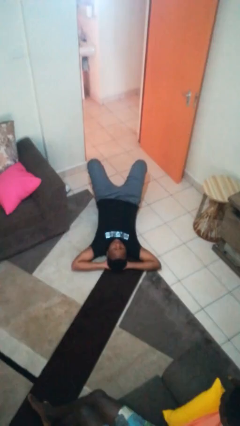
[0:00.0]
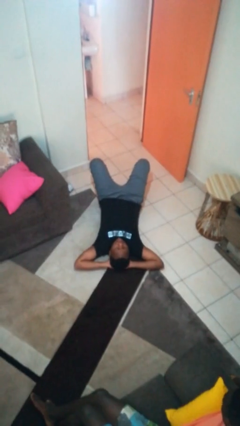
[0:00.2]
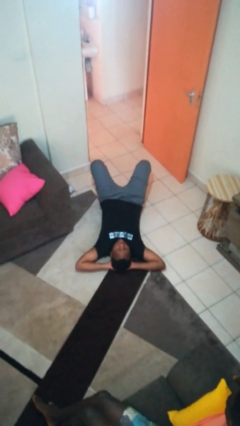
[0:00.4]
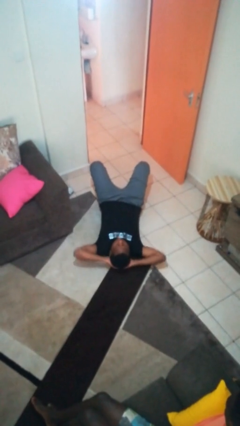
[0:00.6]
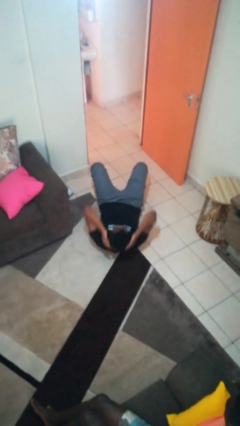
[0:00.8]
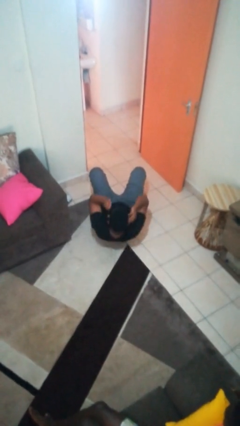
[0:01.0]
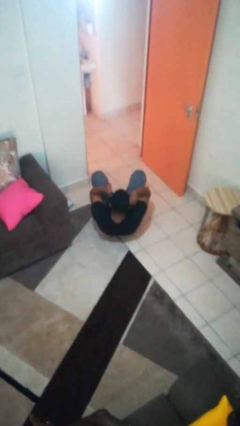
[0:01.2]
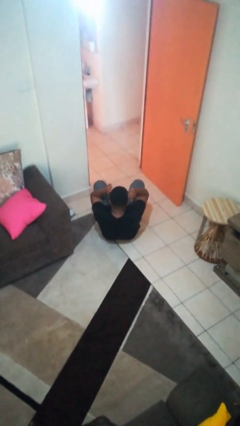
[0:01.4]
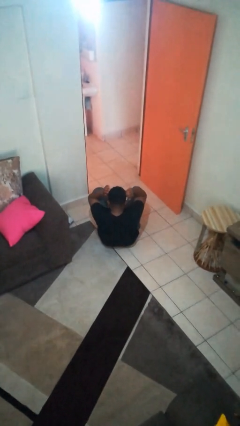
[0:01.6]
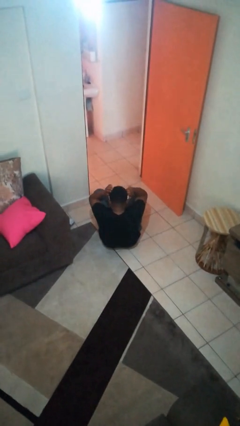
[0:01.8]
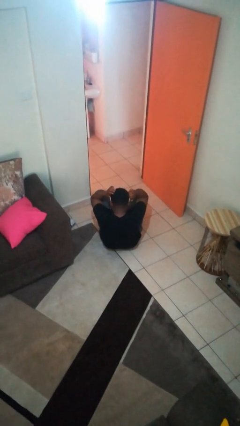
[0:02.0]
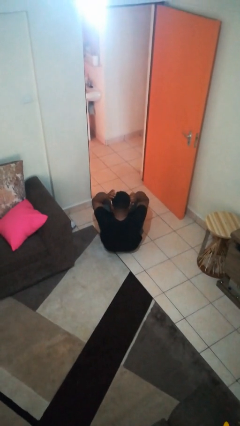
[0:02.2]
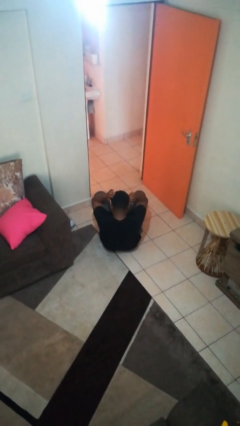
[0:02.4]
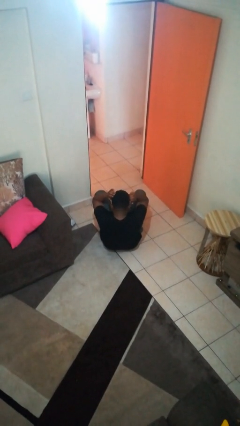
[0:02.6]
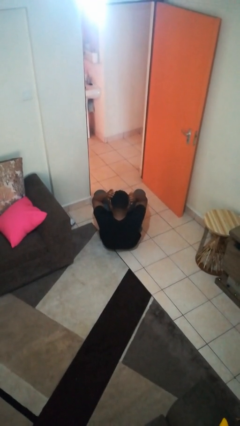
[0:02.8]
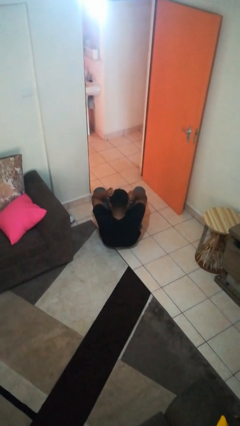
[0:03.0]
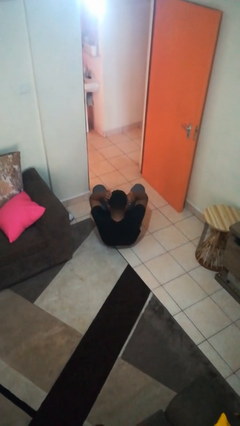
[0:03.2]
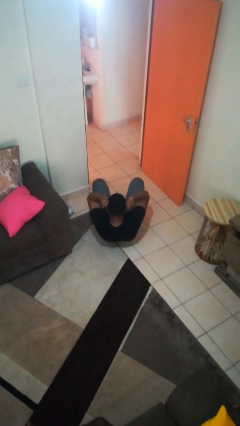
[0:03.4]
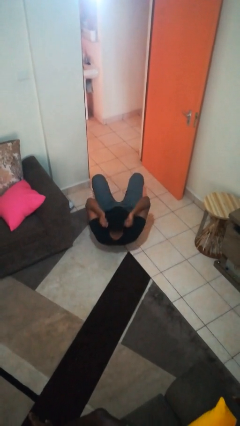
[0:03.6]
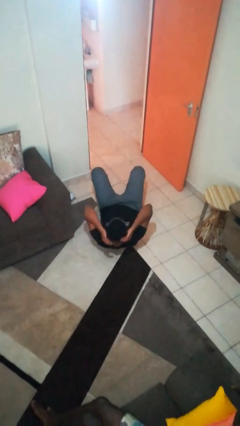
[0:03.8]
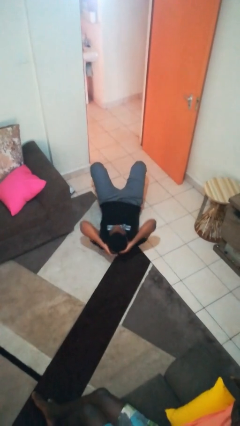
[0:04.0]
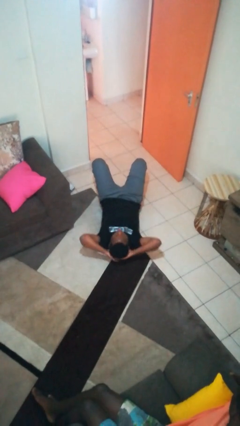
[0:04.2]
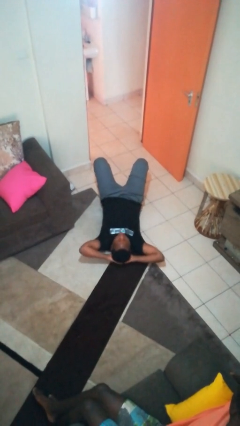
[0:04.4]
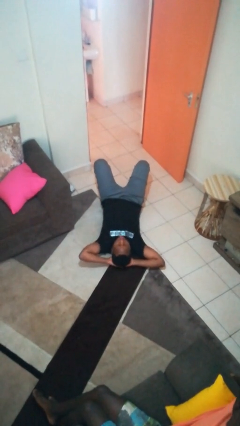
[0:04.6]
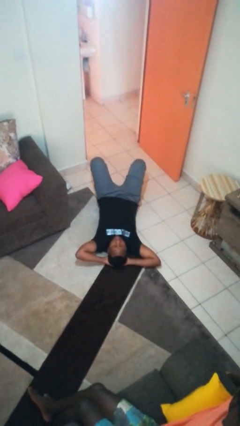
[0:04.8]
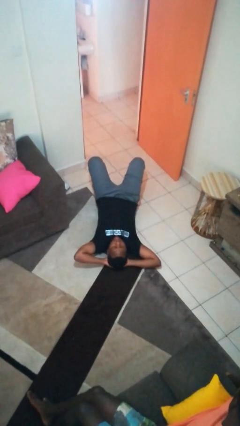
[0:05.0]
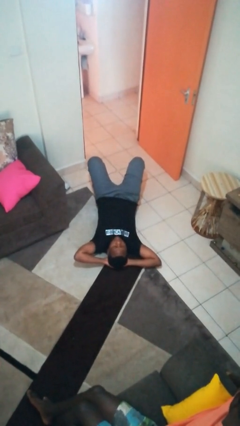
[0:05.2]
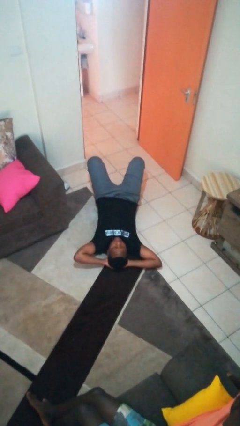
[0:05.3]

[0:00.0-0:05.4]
person exercises with situp

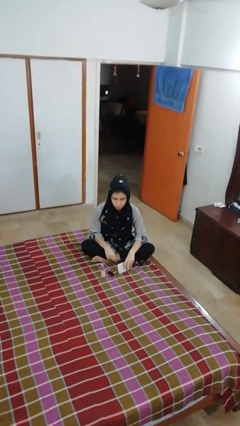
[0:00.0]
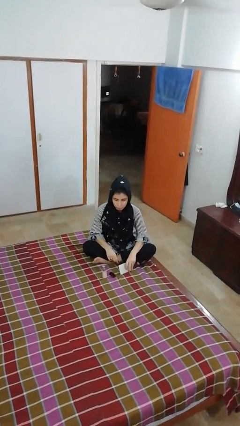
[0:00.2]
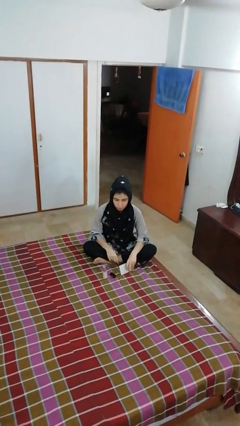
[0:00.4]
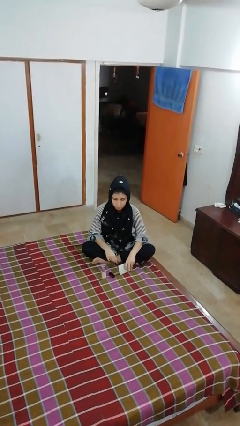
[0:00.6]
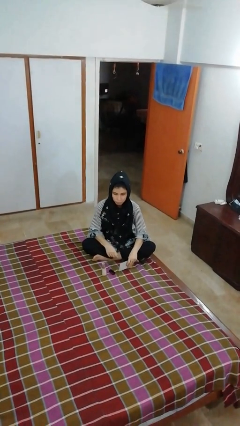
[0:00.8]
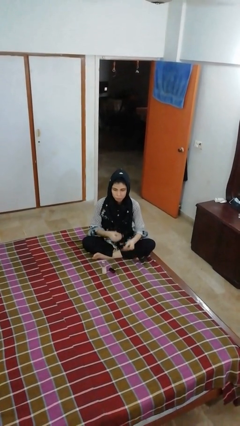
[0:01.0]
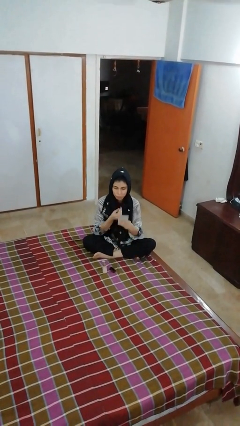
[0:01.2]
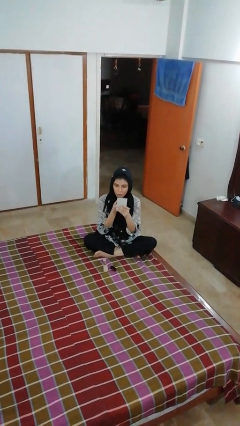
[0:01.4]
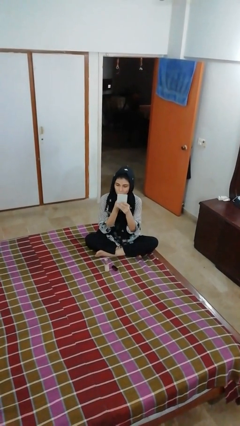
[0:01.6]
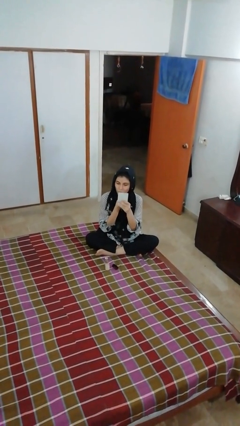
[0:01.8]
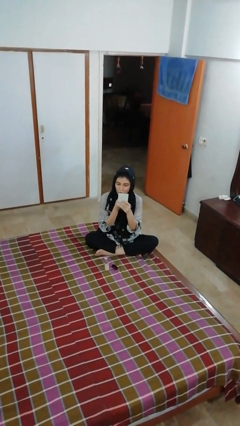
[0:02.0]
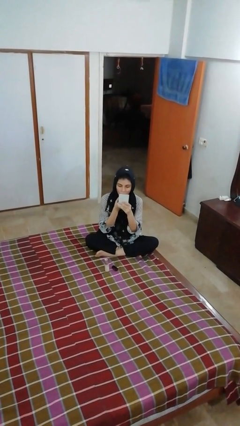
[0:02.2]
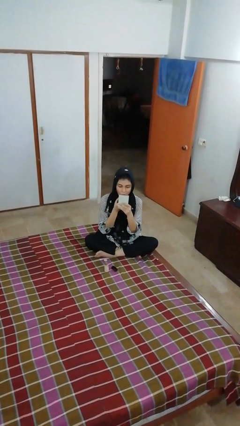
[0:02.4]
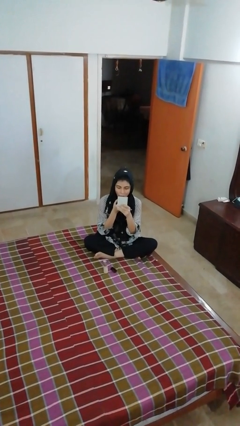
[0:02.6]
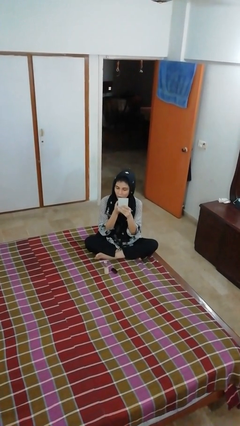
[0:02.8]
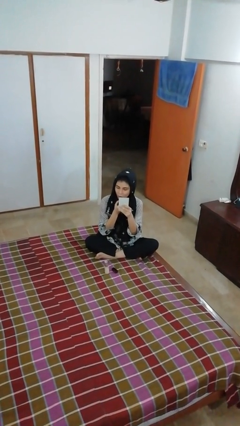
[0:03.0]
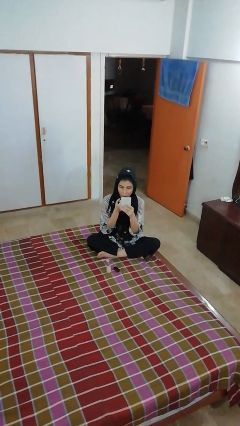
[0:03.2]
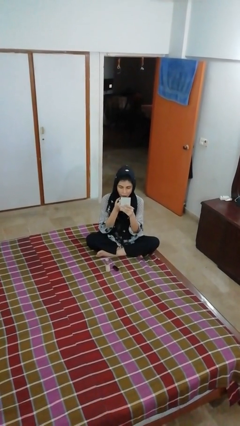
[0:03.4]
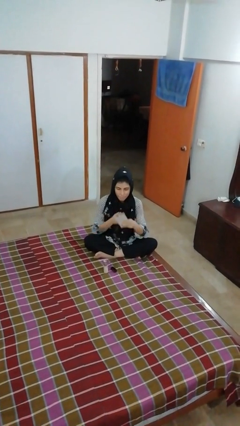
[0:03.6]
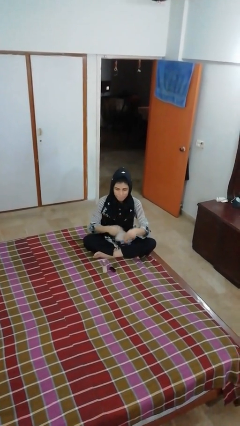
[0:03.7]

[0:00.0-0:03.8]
person applies lip makeup

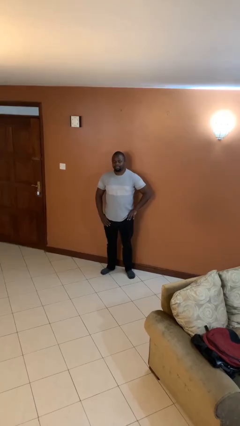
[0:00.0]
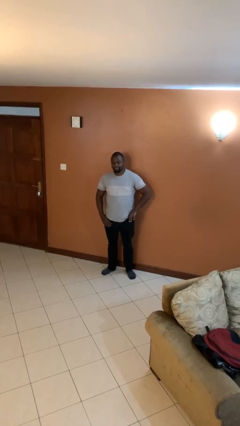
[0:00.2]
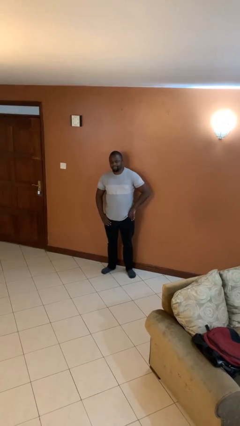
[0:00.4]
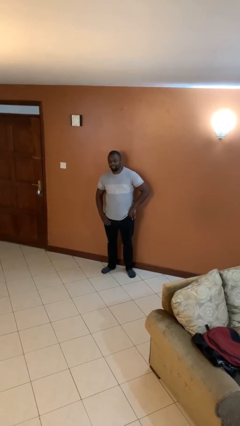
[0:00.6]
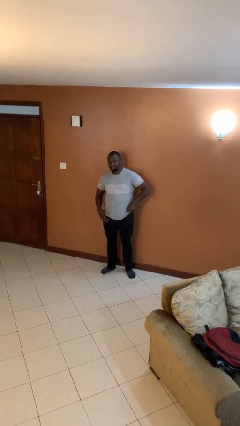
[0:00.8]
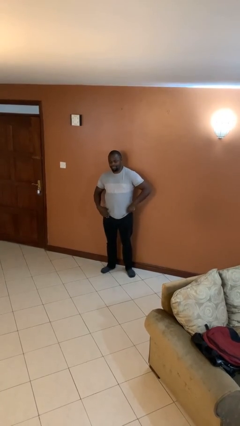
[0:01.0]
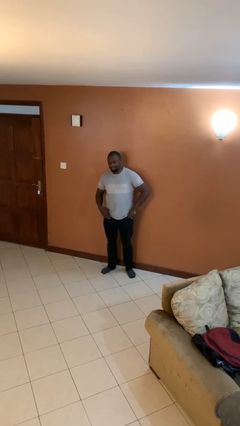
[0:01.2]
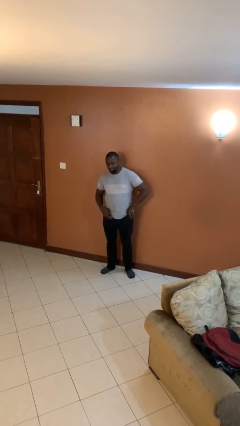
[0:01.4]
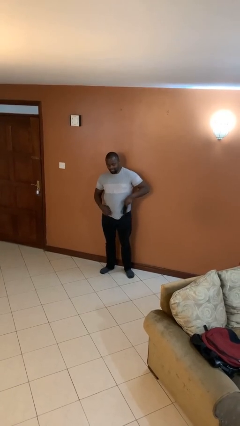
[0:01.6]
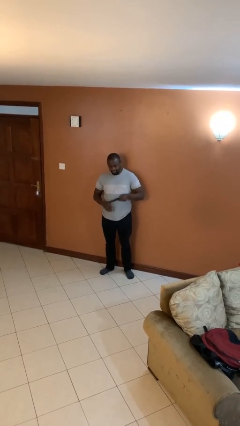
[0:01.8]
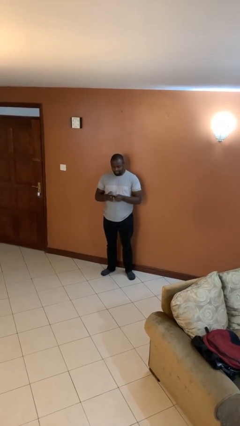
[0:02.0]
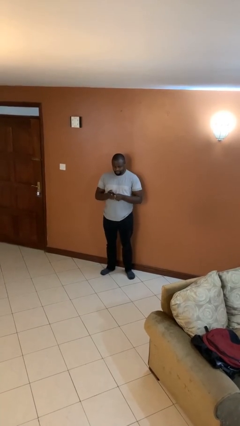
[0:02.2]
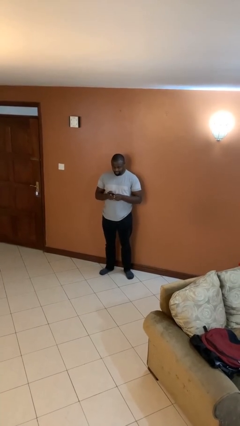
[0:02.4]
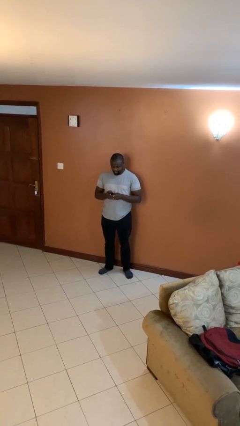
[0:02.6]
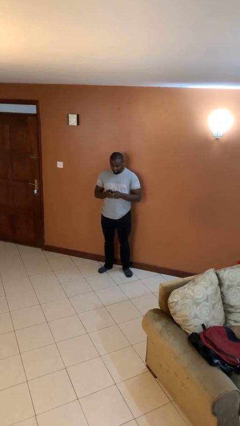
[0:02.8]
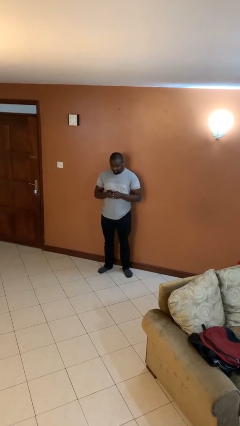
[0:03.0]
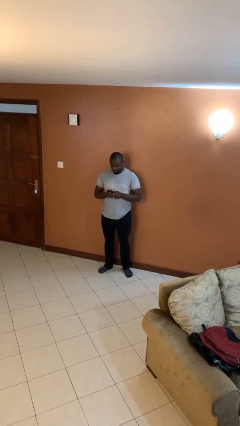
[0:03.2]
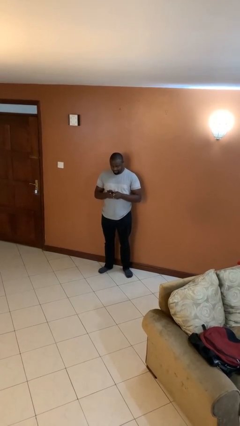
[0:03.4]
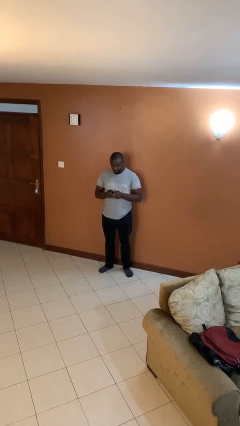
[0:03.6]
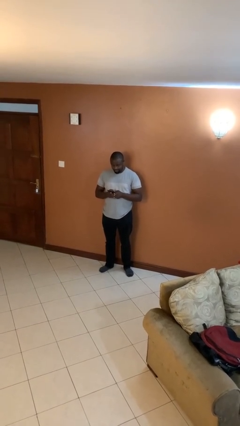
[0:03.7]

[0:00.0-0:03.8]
person takes phone from pocket

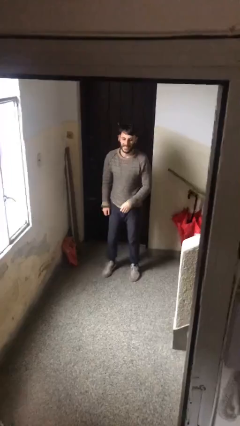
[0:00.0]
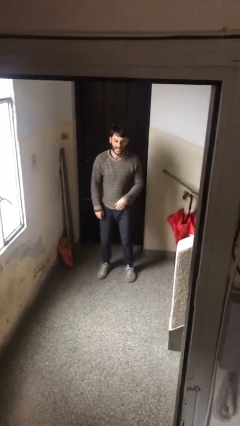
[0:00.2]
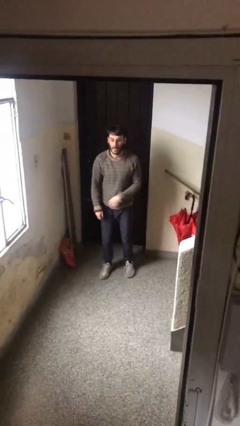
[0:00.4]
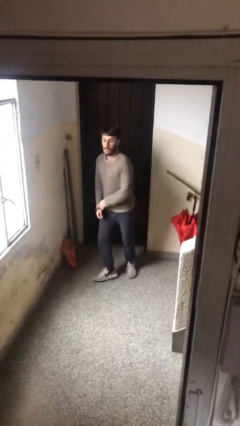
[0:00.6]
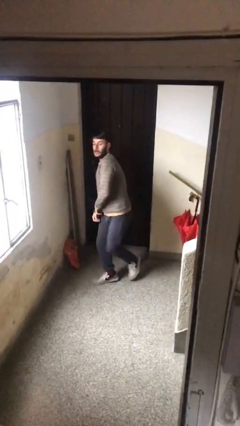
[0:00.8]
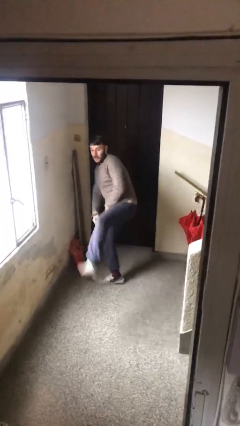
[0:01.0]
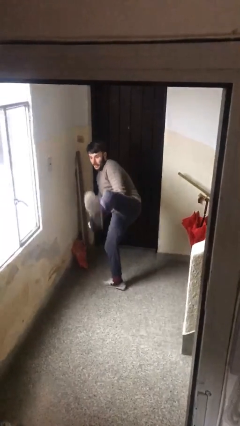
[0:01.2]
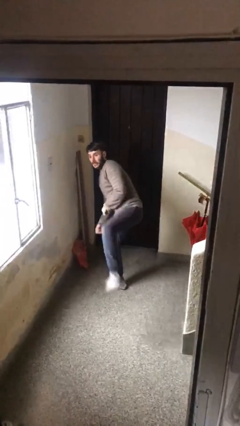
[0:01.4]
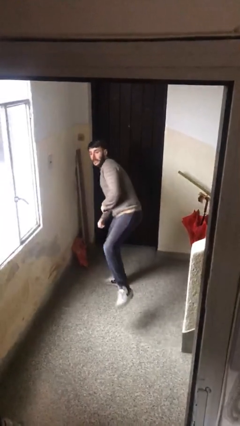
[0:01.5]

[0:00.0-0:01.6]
person karate kicks

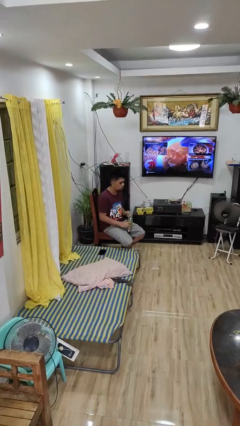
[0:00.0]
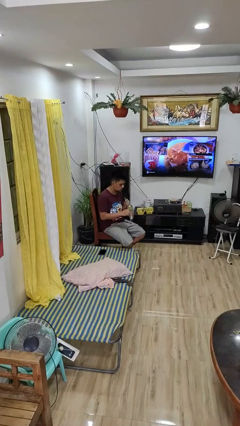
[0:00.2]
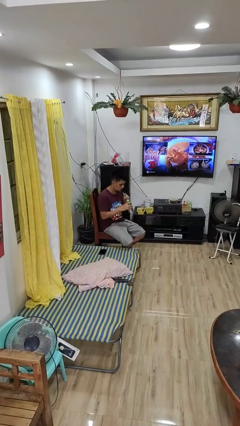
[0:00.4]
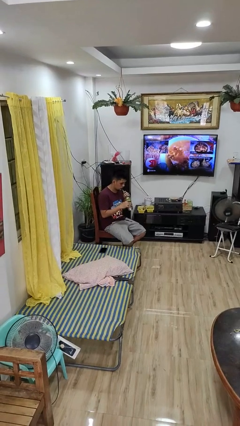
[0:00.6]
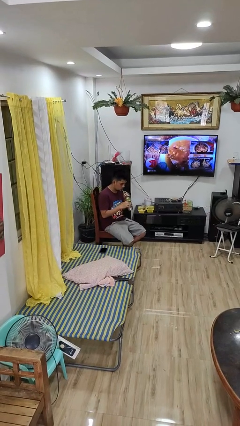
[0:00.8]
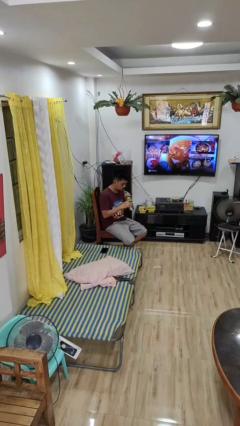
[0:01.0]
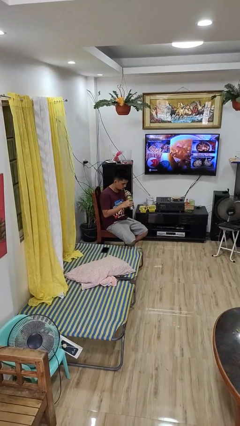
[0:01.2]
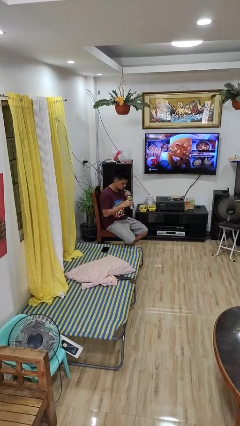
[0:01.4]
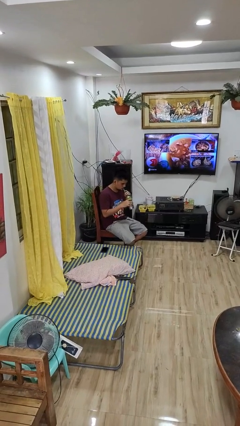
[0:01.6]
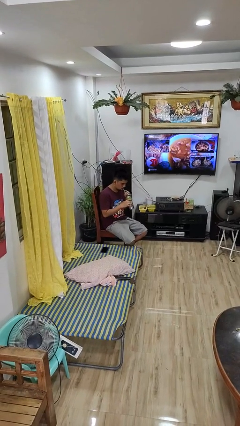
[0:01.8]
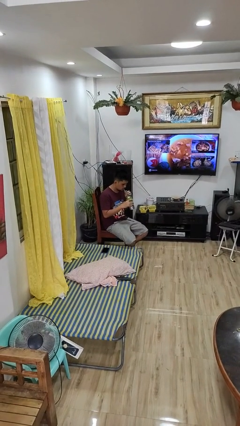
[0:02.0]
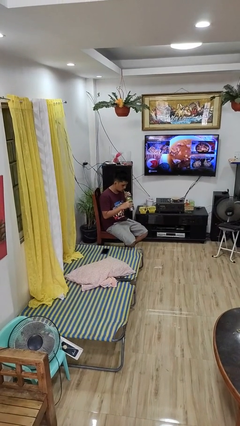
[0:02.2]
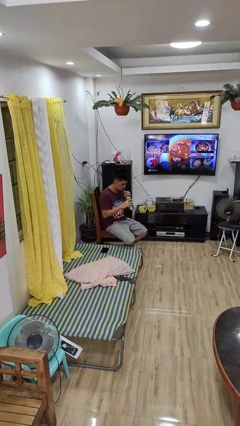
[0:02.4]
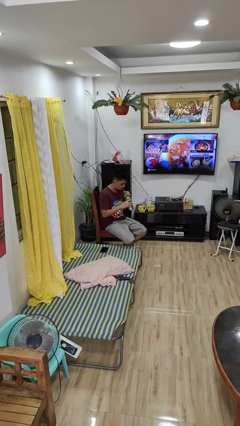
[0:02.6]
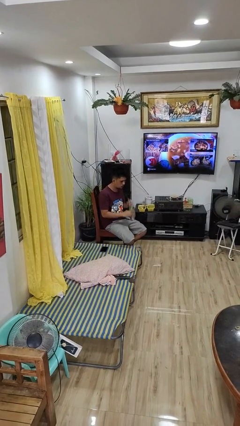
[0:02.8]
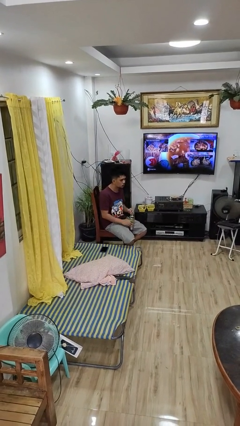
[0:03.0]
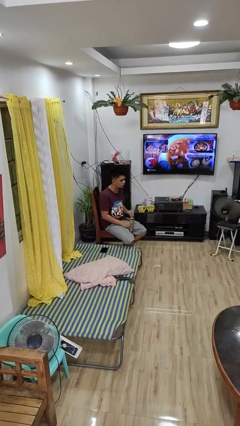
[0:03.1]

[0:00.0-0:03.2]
person drinks from straw
